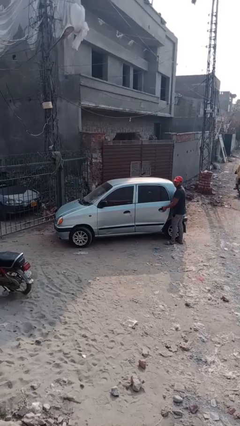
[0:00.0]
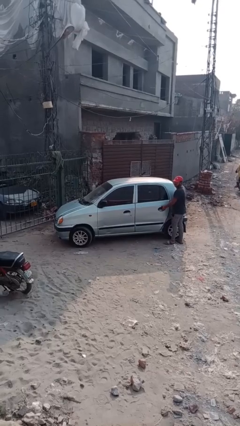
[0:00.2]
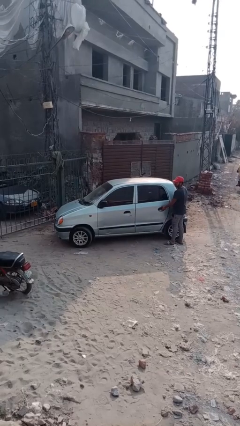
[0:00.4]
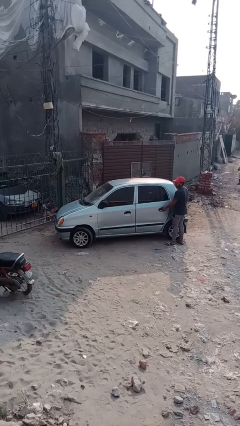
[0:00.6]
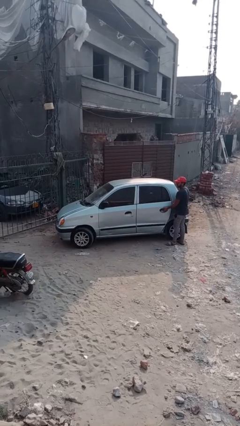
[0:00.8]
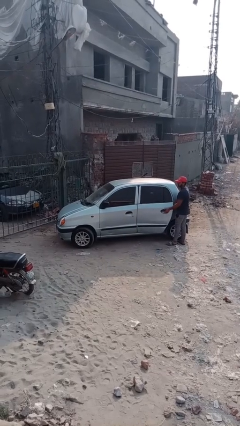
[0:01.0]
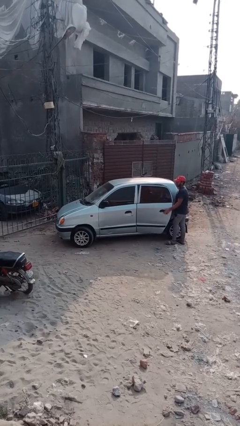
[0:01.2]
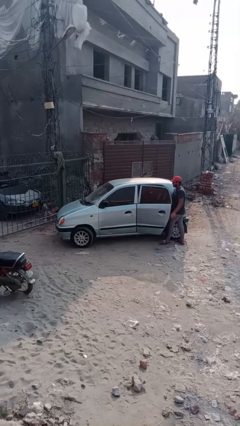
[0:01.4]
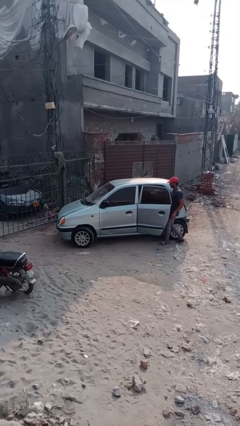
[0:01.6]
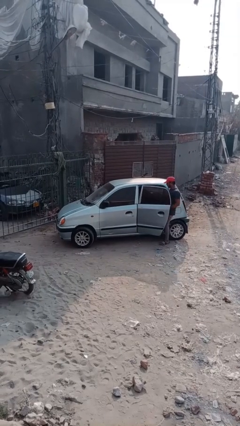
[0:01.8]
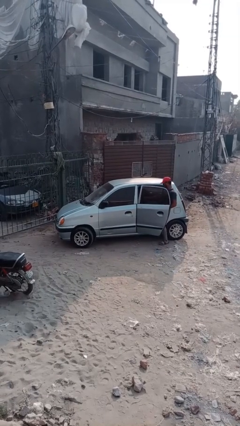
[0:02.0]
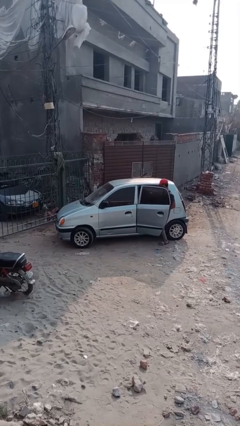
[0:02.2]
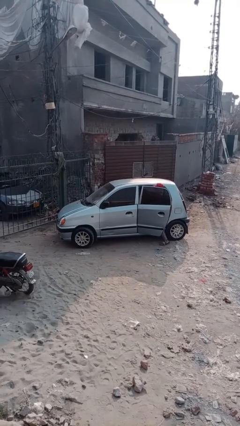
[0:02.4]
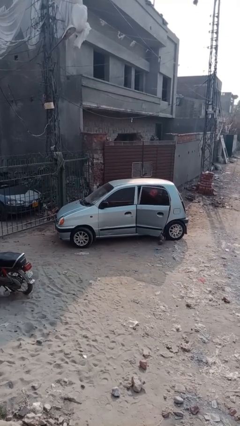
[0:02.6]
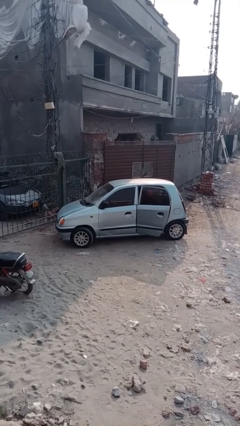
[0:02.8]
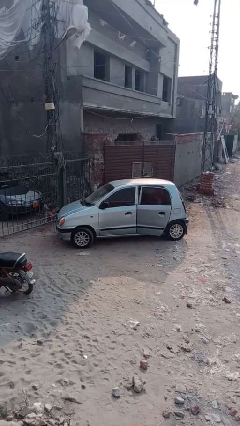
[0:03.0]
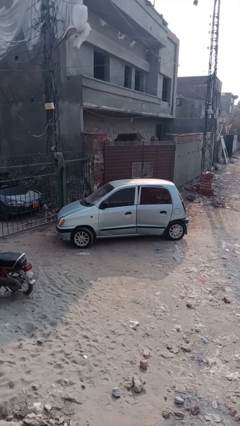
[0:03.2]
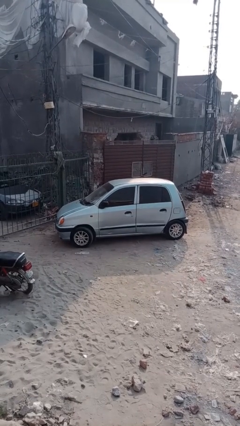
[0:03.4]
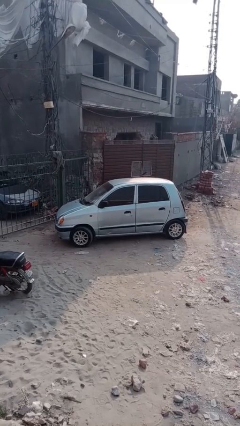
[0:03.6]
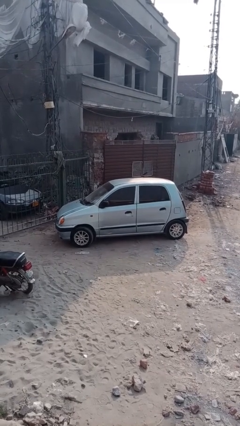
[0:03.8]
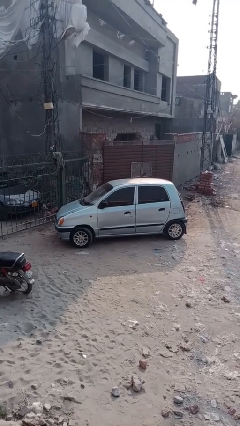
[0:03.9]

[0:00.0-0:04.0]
car picks up person

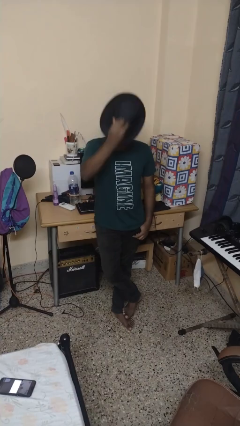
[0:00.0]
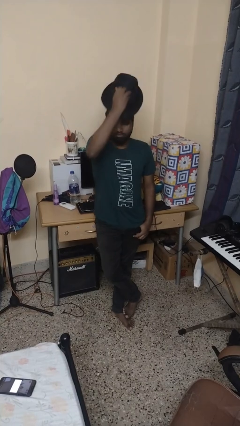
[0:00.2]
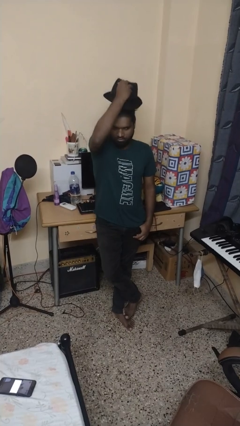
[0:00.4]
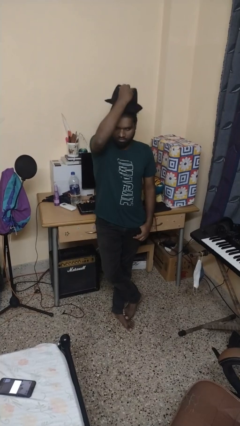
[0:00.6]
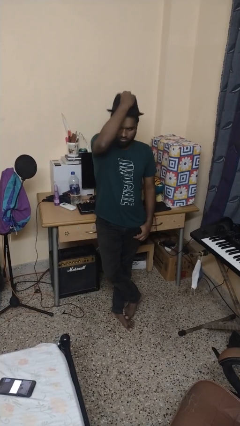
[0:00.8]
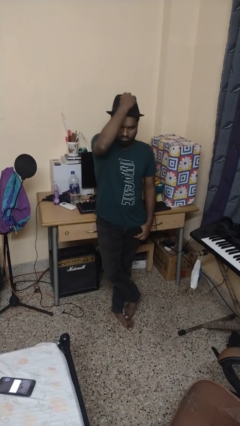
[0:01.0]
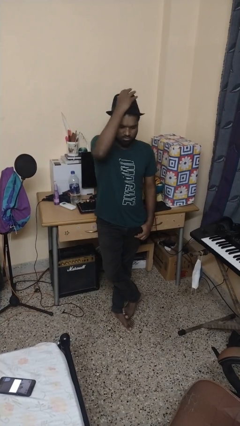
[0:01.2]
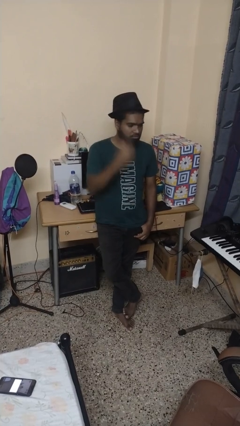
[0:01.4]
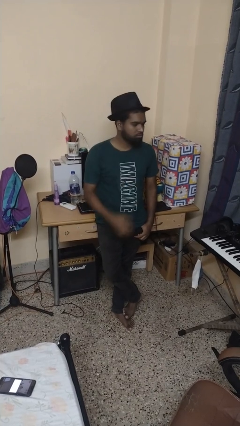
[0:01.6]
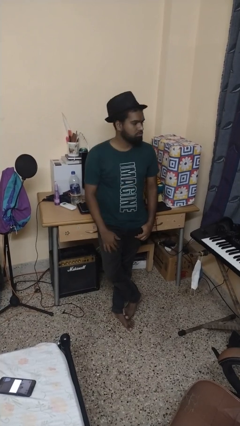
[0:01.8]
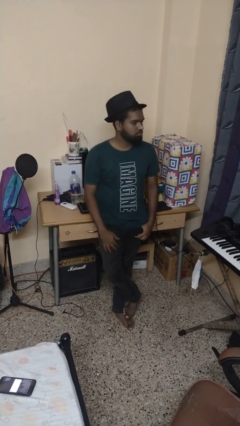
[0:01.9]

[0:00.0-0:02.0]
person puts on hat

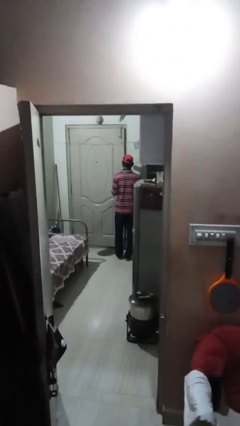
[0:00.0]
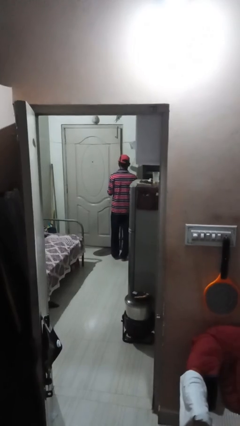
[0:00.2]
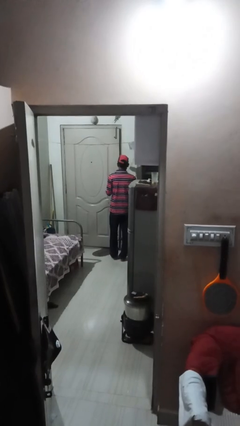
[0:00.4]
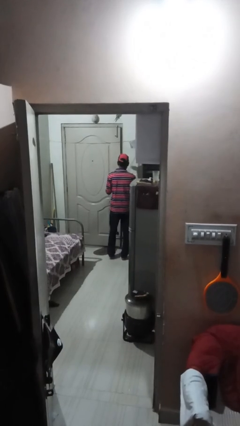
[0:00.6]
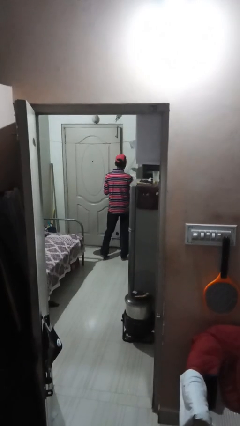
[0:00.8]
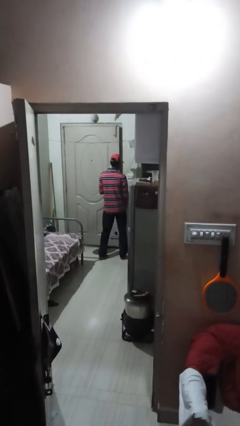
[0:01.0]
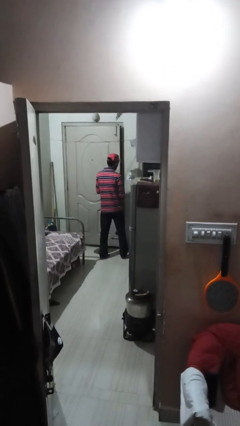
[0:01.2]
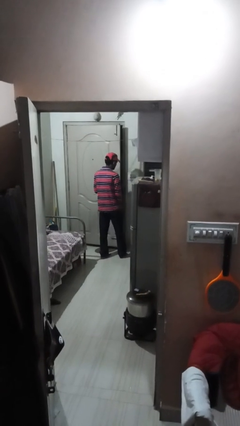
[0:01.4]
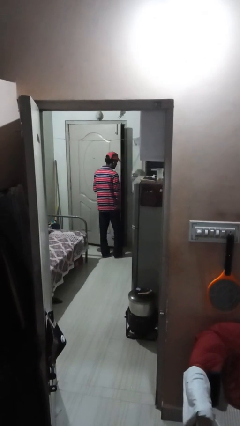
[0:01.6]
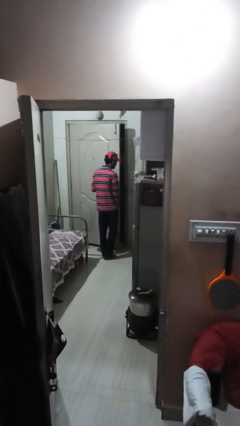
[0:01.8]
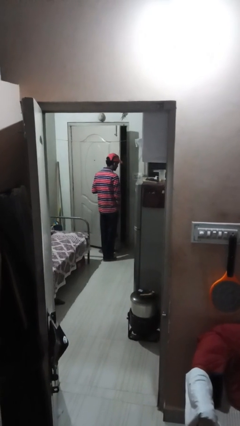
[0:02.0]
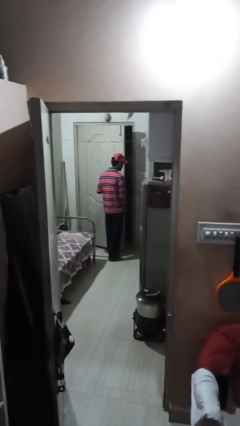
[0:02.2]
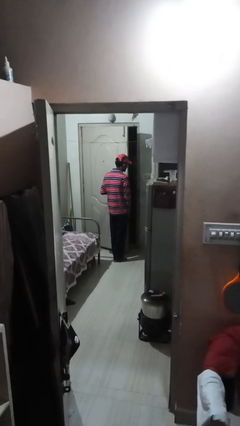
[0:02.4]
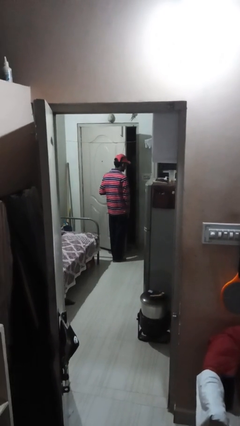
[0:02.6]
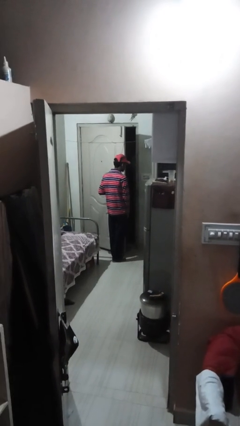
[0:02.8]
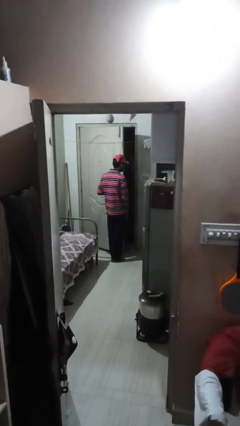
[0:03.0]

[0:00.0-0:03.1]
person opens facility door

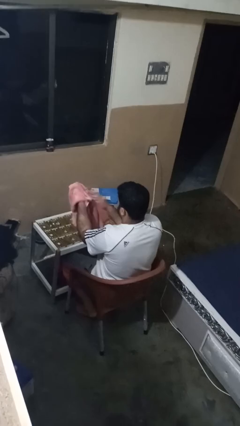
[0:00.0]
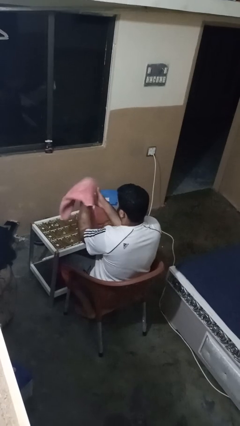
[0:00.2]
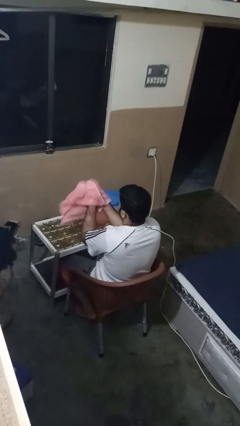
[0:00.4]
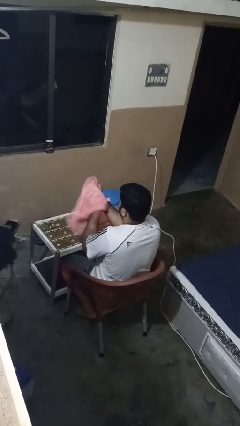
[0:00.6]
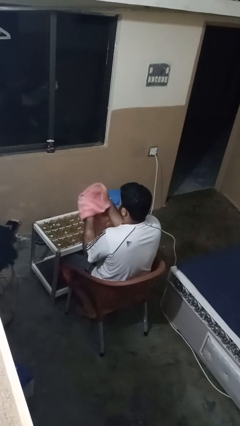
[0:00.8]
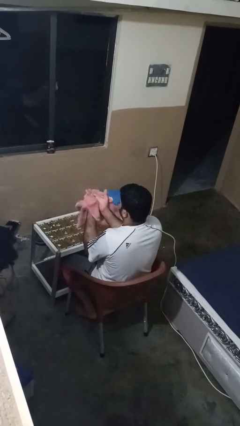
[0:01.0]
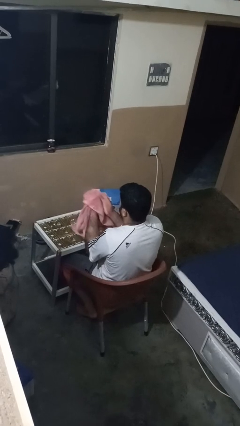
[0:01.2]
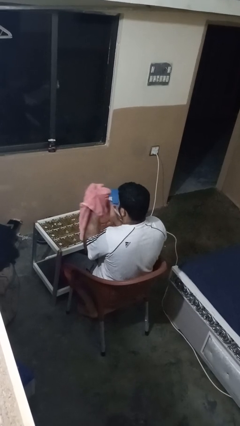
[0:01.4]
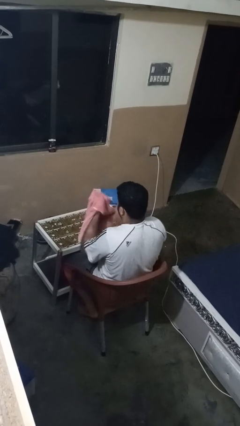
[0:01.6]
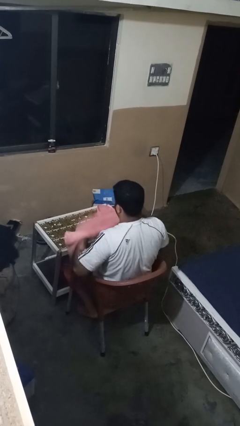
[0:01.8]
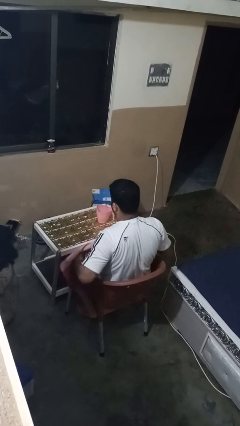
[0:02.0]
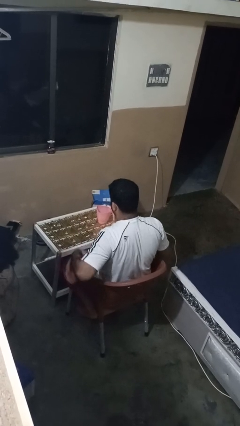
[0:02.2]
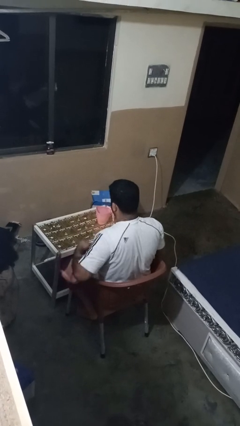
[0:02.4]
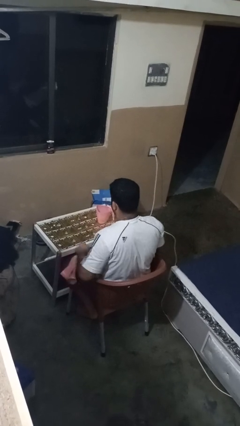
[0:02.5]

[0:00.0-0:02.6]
person dries hands with towel

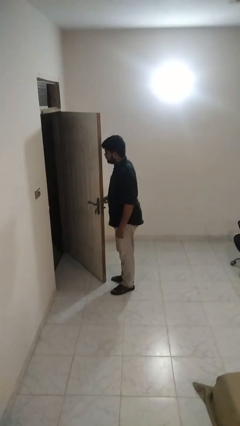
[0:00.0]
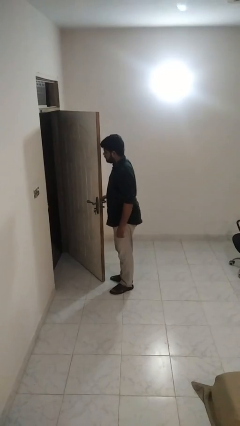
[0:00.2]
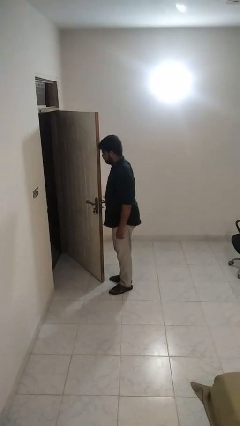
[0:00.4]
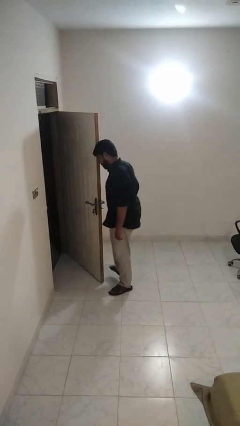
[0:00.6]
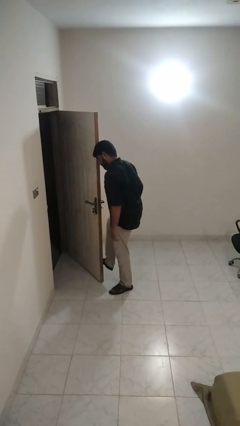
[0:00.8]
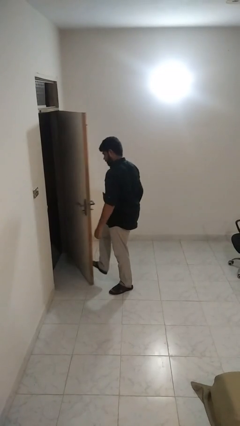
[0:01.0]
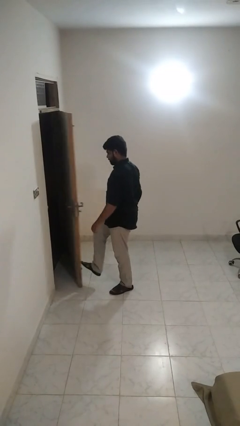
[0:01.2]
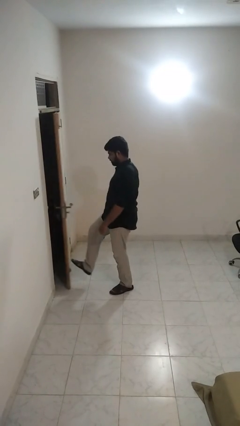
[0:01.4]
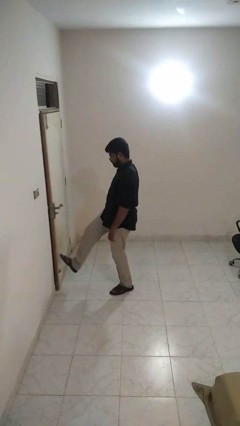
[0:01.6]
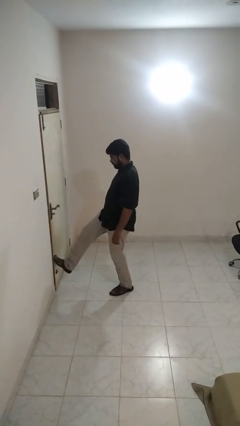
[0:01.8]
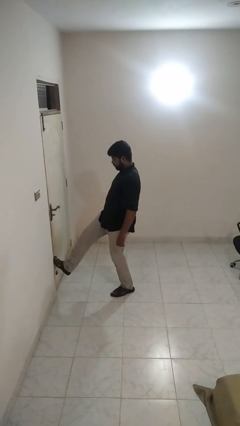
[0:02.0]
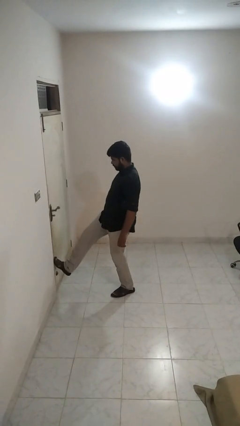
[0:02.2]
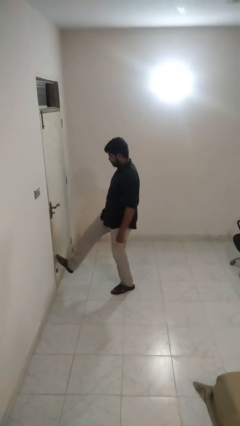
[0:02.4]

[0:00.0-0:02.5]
person closes door with foot

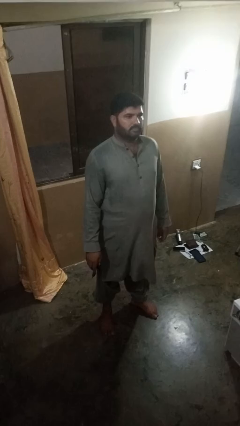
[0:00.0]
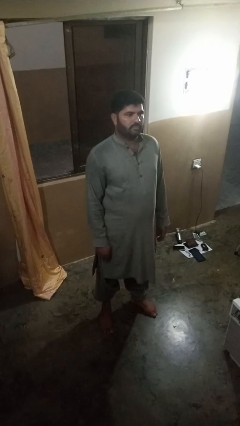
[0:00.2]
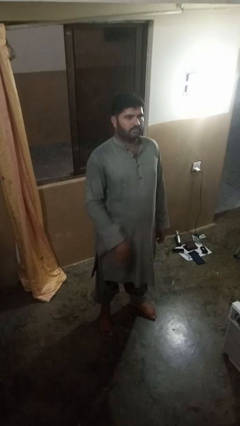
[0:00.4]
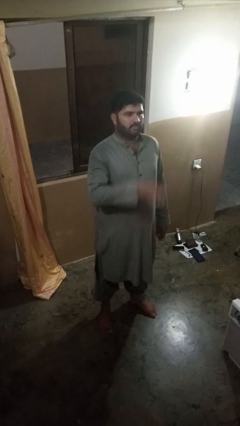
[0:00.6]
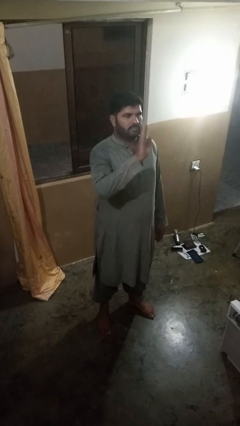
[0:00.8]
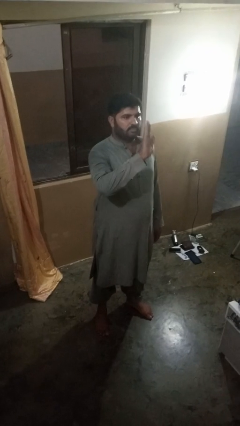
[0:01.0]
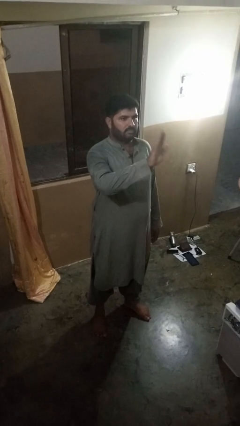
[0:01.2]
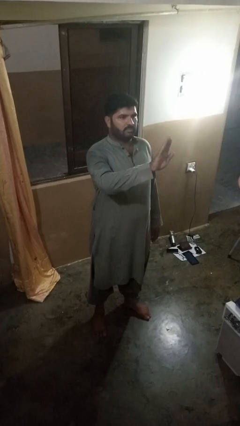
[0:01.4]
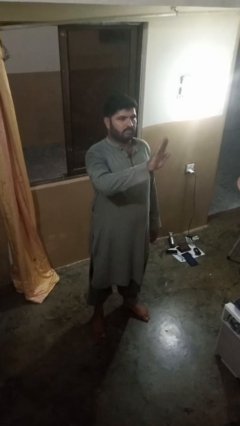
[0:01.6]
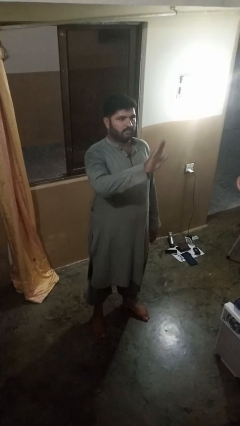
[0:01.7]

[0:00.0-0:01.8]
person gestures stop

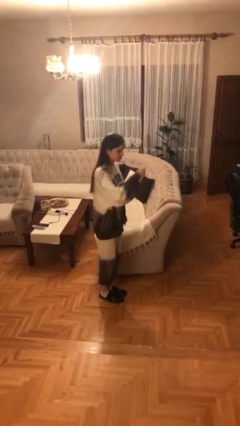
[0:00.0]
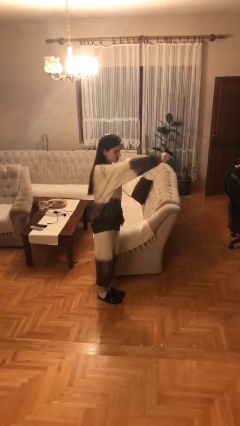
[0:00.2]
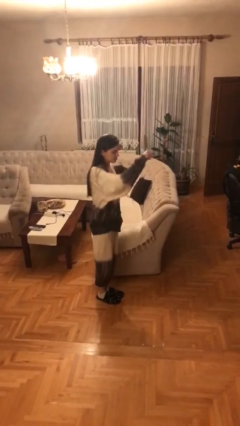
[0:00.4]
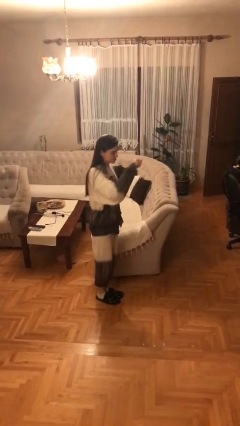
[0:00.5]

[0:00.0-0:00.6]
person punches

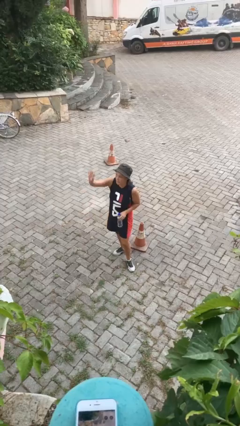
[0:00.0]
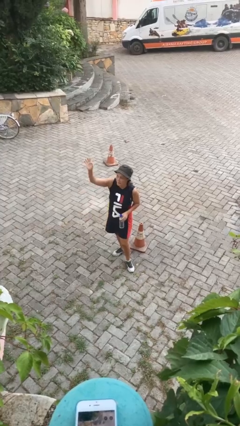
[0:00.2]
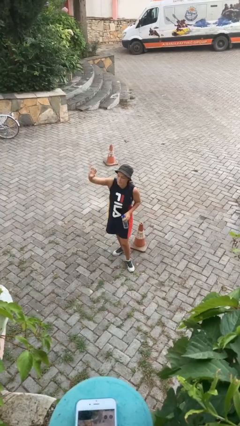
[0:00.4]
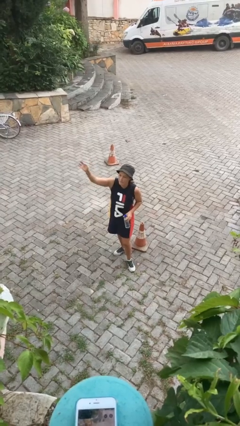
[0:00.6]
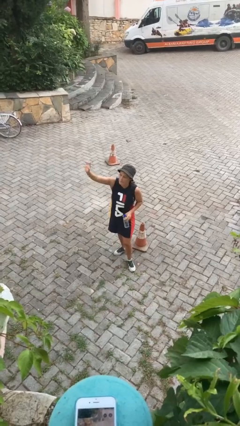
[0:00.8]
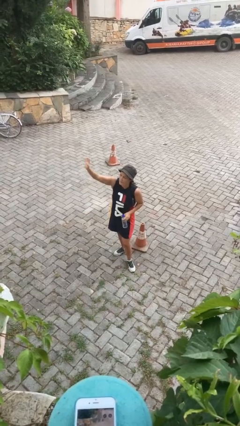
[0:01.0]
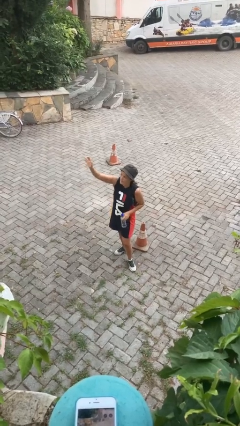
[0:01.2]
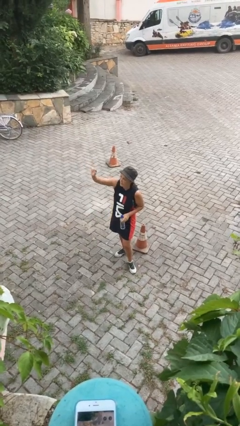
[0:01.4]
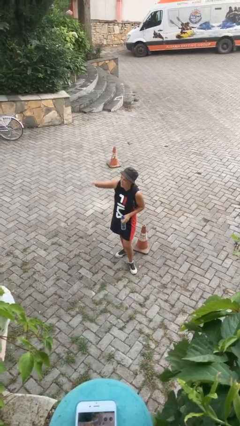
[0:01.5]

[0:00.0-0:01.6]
person gestures raise hand